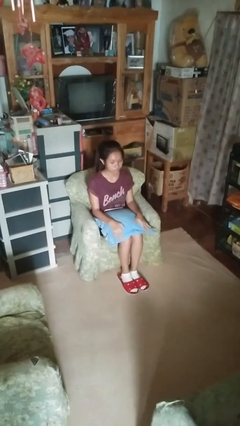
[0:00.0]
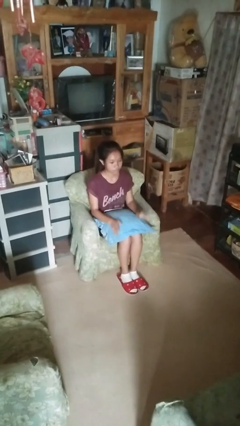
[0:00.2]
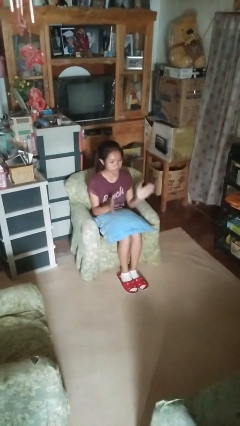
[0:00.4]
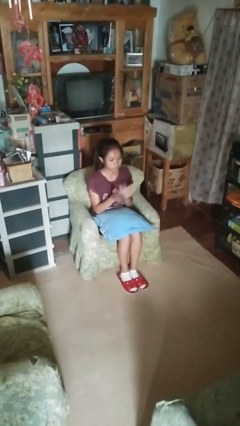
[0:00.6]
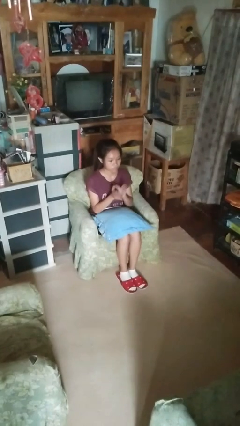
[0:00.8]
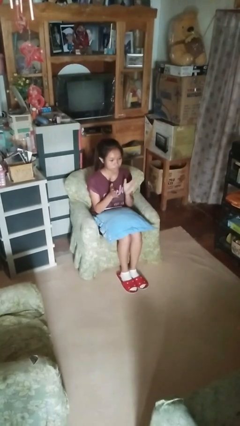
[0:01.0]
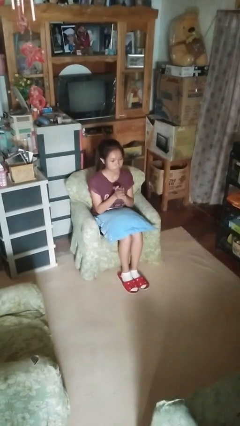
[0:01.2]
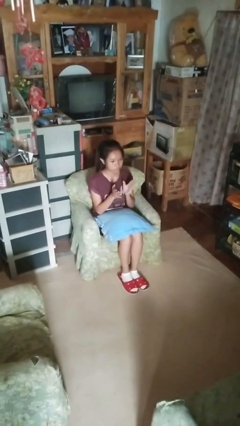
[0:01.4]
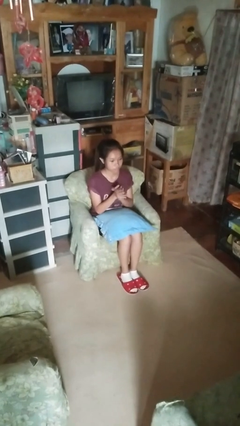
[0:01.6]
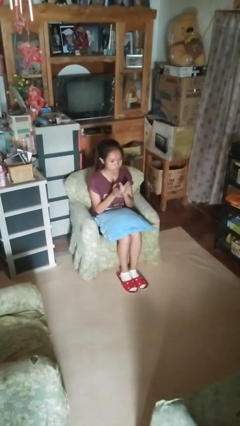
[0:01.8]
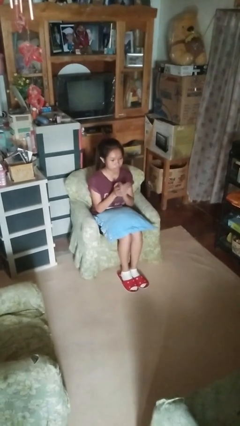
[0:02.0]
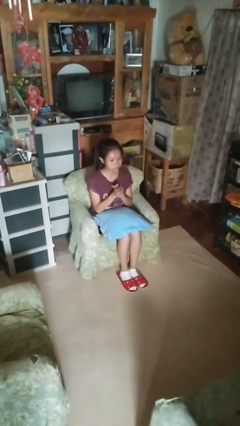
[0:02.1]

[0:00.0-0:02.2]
person claps hands

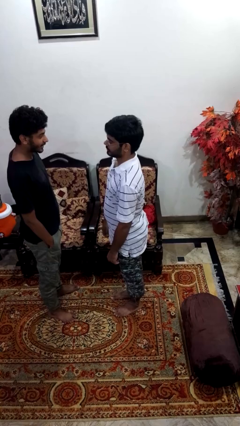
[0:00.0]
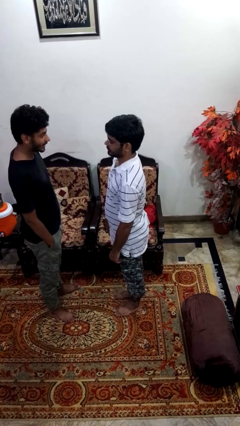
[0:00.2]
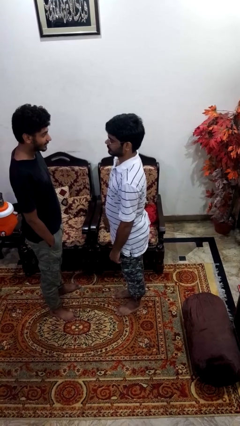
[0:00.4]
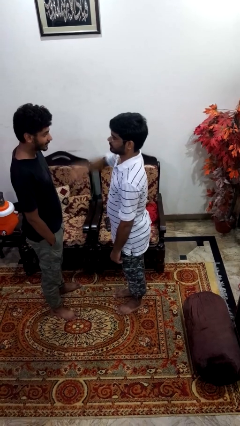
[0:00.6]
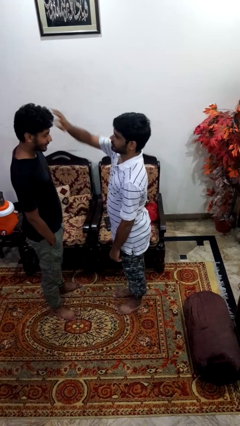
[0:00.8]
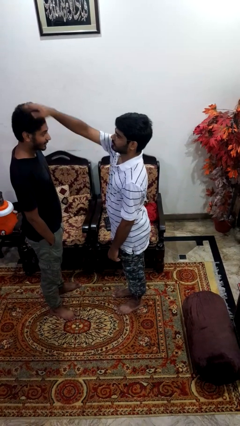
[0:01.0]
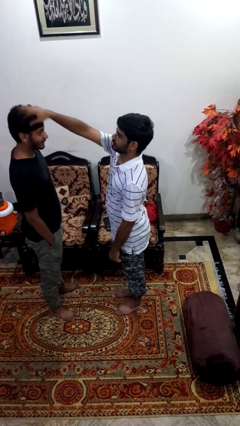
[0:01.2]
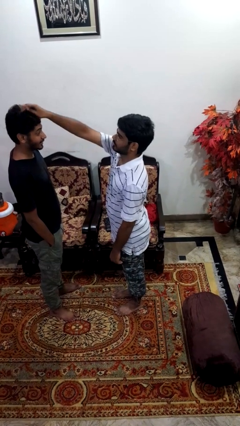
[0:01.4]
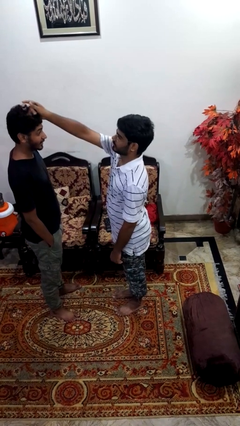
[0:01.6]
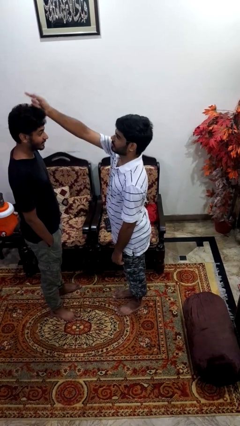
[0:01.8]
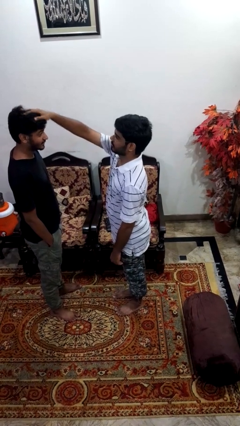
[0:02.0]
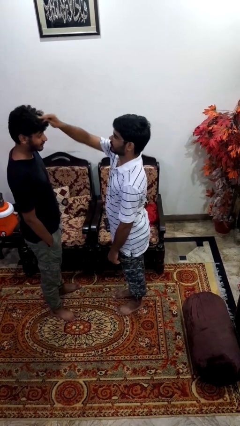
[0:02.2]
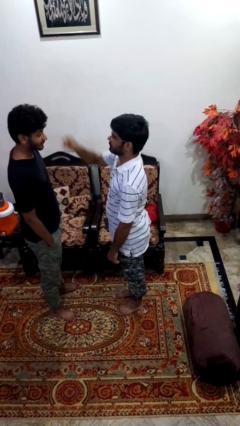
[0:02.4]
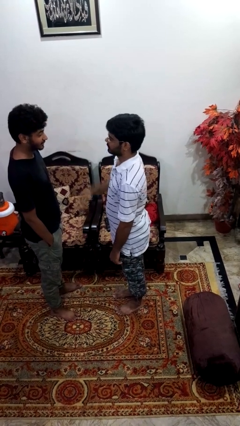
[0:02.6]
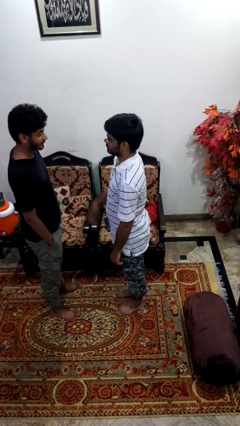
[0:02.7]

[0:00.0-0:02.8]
person grabs person by hair
